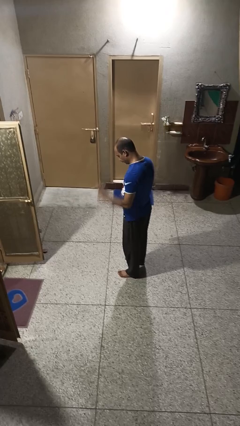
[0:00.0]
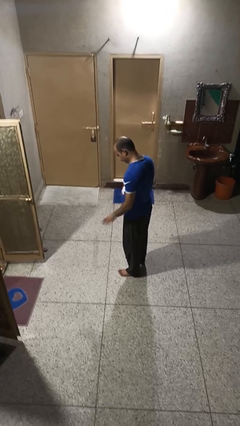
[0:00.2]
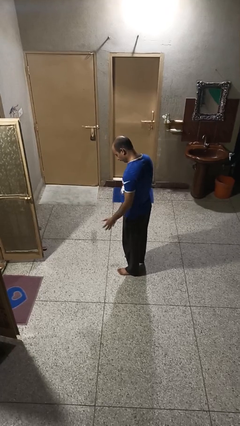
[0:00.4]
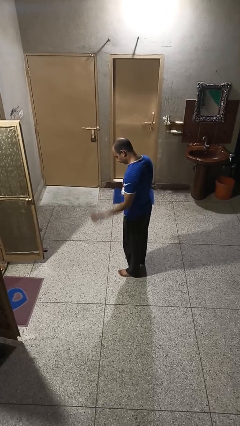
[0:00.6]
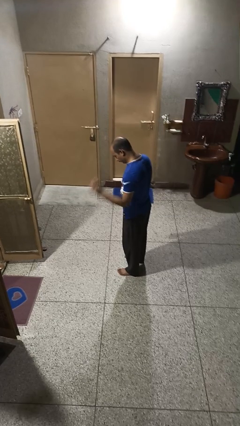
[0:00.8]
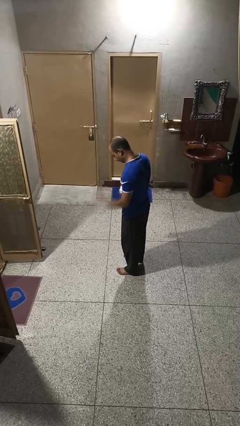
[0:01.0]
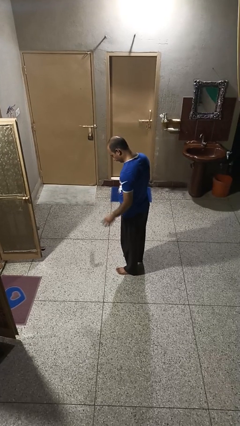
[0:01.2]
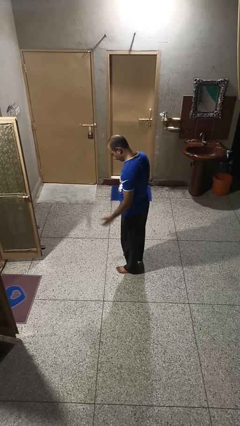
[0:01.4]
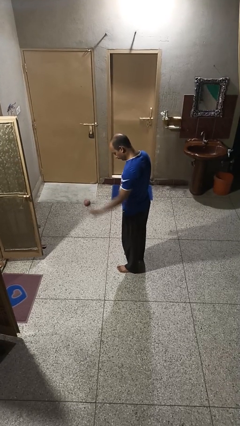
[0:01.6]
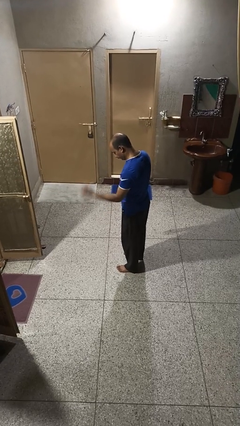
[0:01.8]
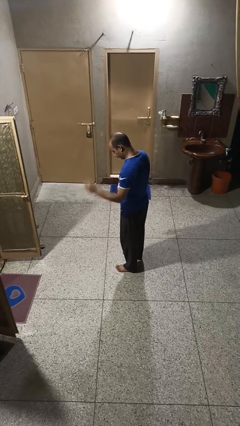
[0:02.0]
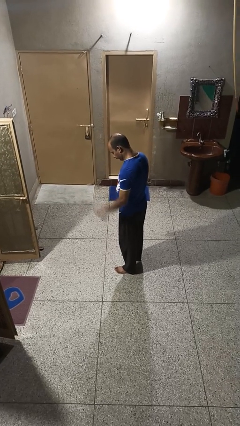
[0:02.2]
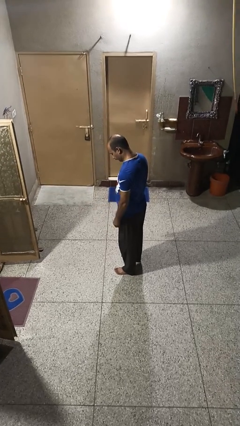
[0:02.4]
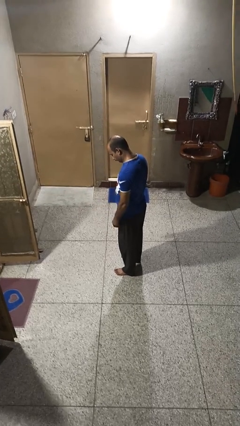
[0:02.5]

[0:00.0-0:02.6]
person bounces ball on floor

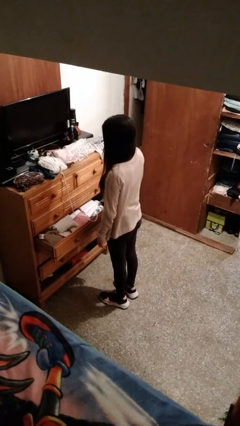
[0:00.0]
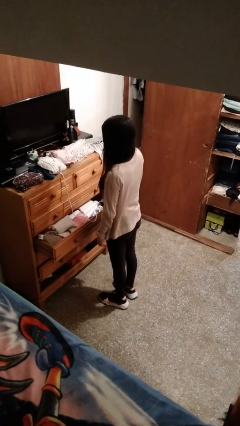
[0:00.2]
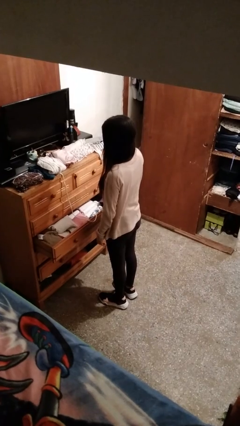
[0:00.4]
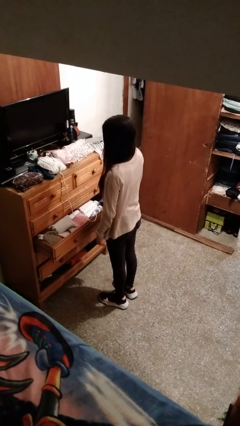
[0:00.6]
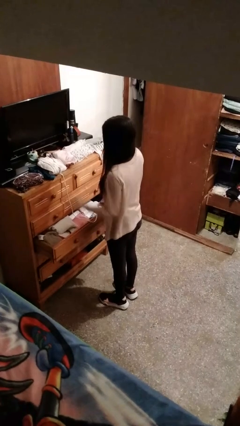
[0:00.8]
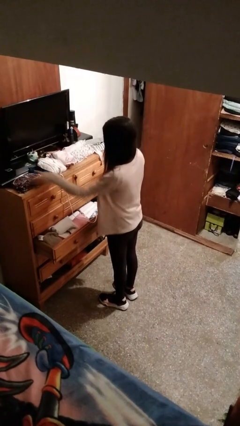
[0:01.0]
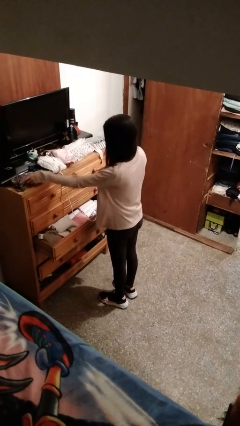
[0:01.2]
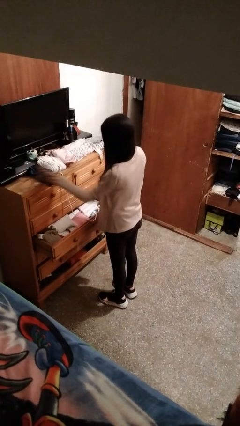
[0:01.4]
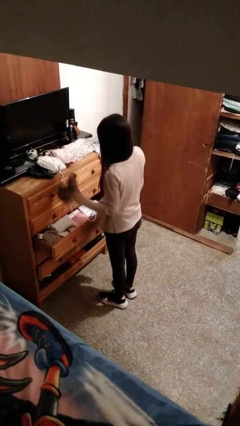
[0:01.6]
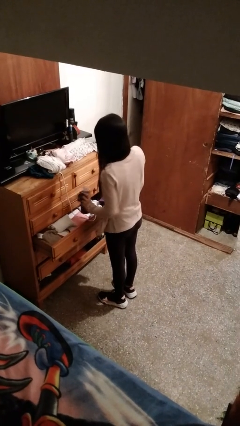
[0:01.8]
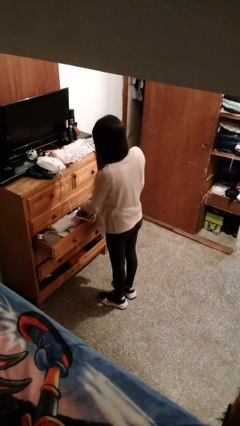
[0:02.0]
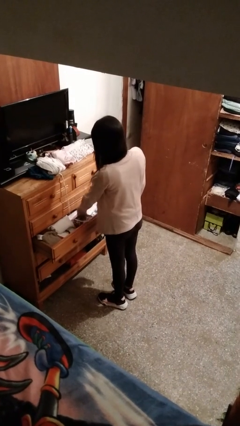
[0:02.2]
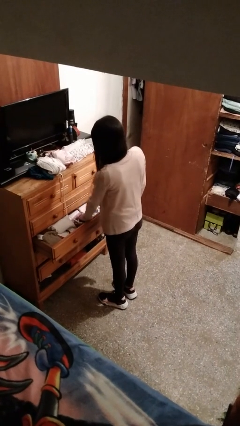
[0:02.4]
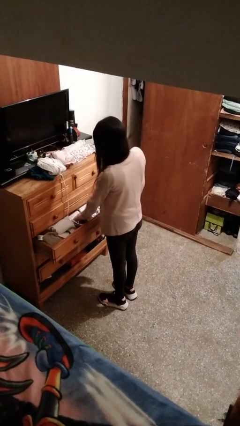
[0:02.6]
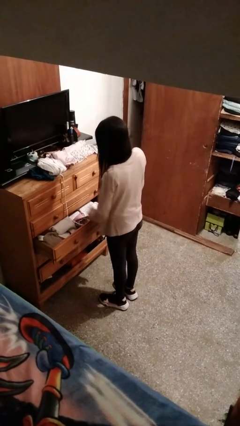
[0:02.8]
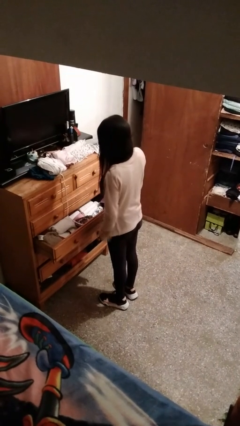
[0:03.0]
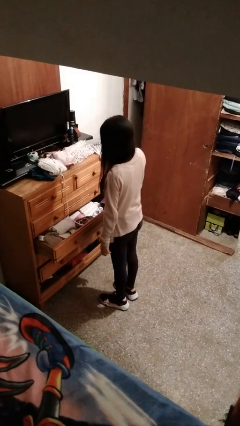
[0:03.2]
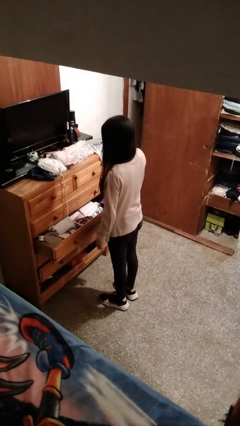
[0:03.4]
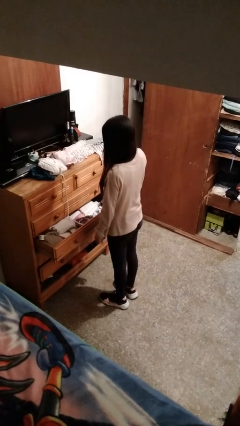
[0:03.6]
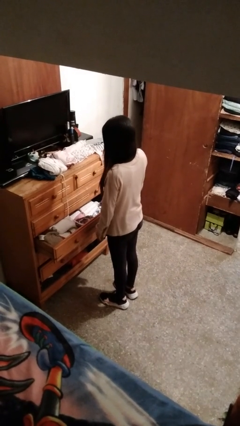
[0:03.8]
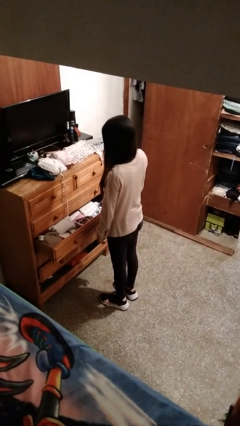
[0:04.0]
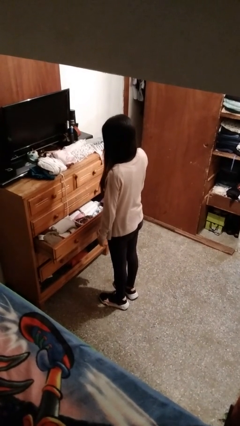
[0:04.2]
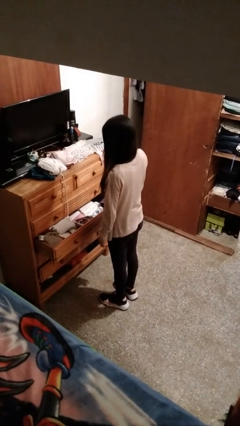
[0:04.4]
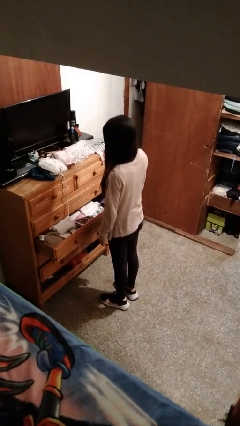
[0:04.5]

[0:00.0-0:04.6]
person puts clothes into dresser

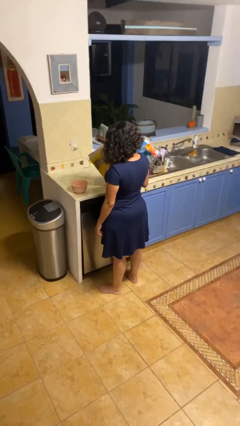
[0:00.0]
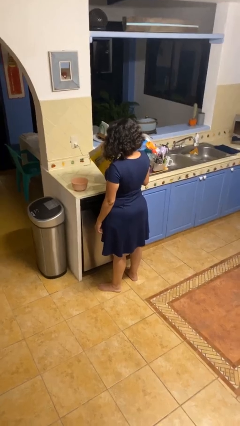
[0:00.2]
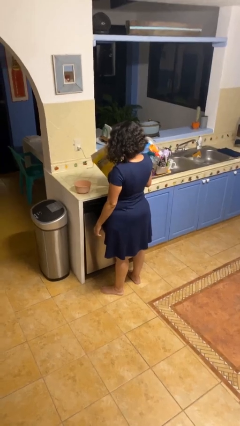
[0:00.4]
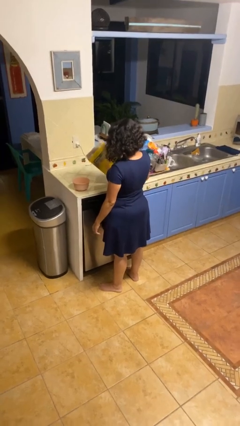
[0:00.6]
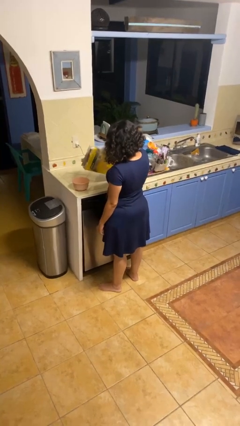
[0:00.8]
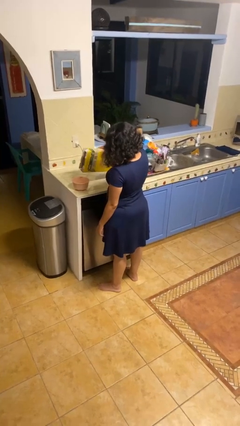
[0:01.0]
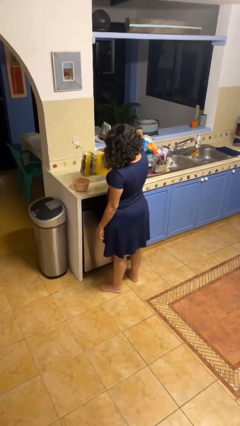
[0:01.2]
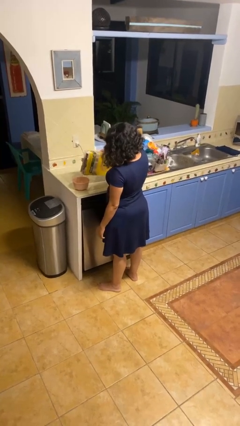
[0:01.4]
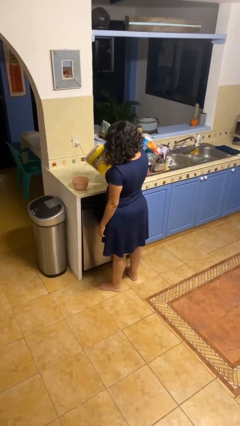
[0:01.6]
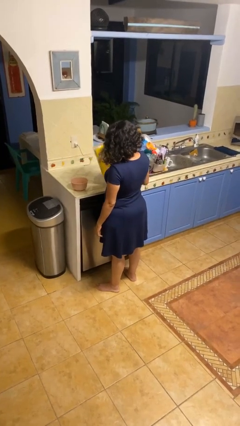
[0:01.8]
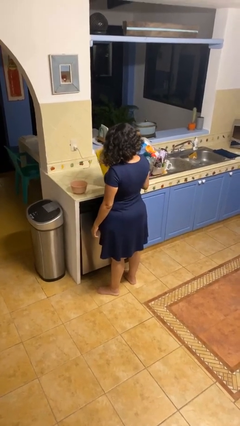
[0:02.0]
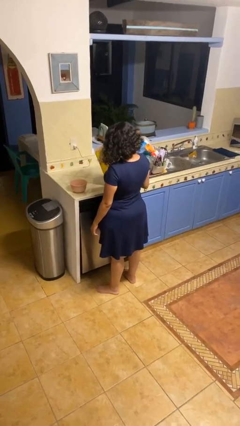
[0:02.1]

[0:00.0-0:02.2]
person pours into bowl

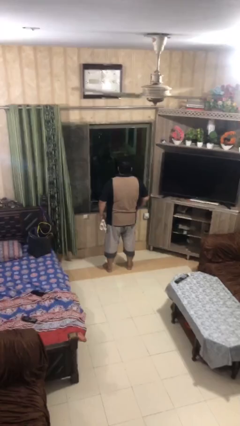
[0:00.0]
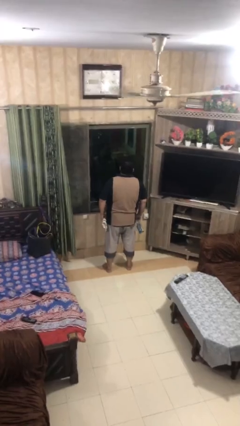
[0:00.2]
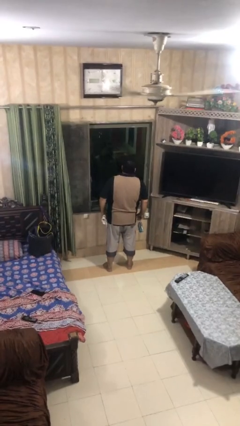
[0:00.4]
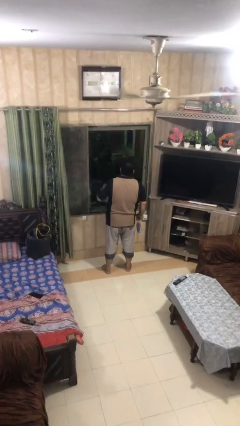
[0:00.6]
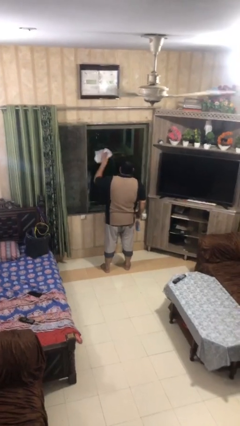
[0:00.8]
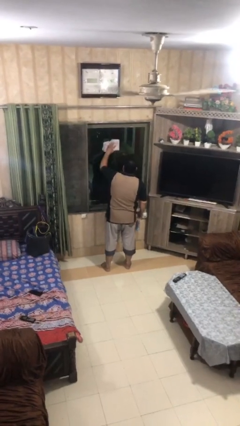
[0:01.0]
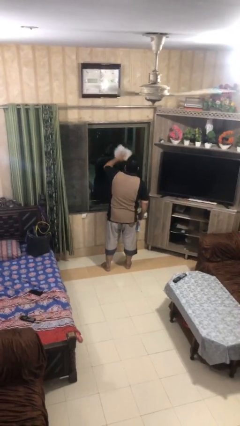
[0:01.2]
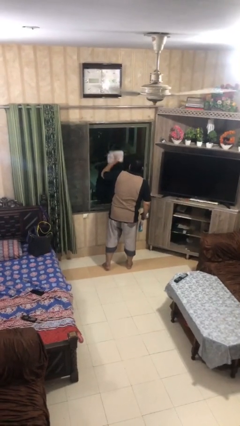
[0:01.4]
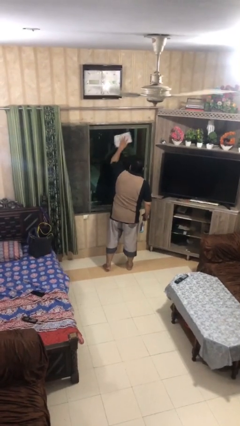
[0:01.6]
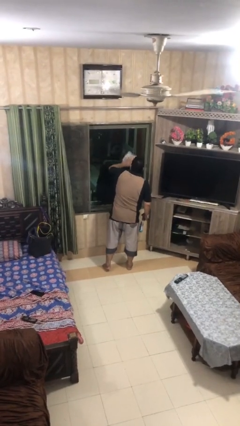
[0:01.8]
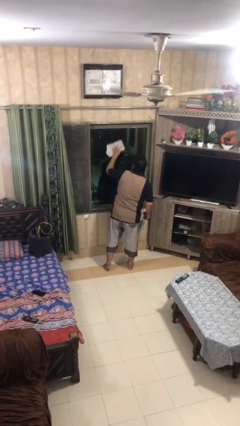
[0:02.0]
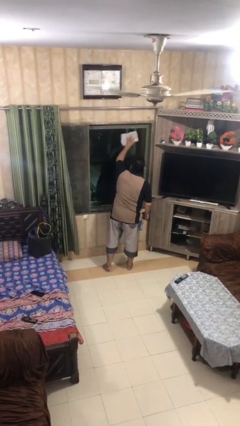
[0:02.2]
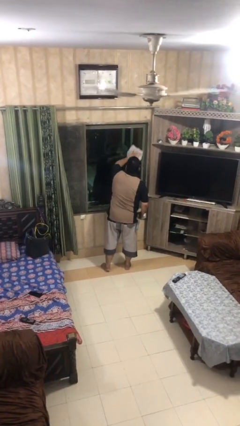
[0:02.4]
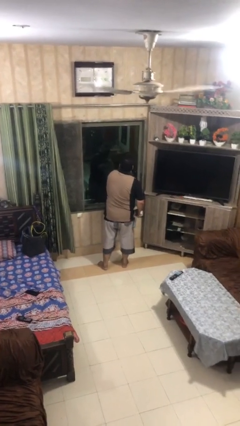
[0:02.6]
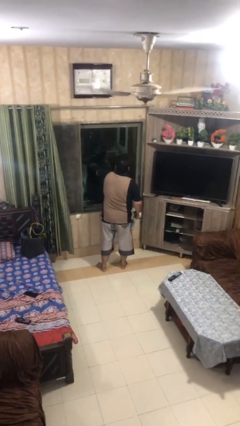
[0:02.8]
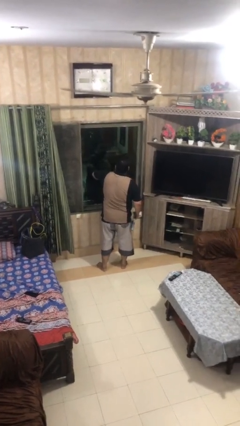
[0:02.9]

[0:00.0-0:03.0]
person washes window

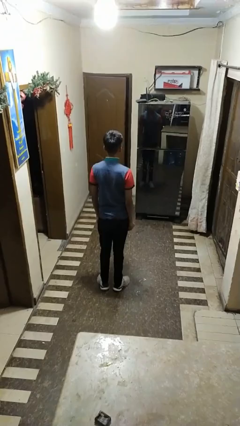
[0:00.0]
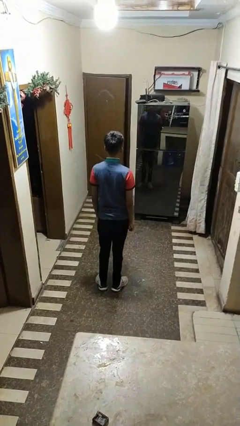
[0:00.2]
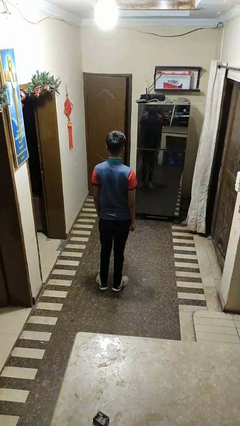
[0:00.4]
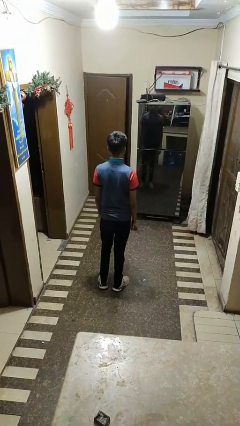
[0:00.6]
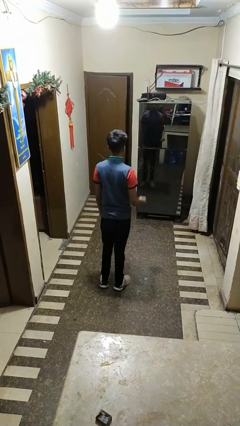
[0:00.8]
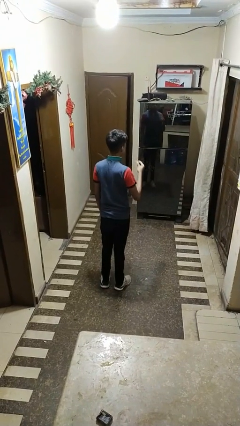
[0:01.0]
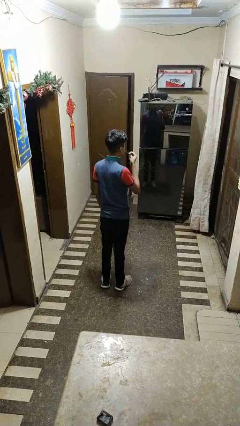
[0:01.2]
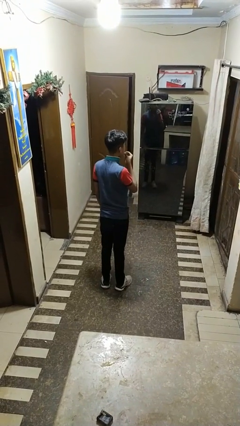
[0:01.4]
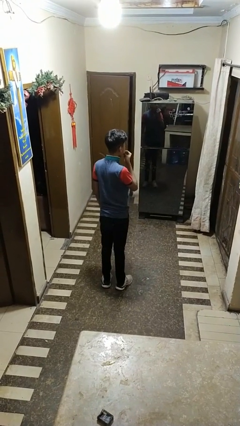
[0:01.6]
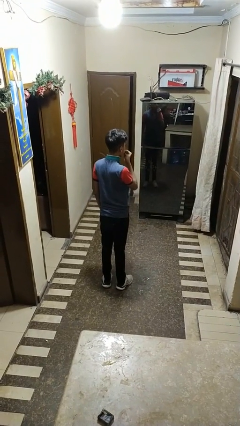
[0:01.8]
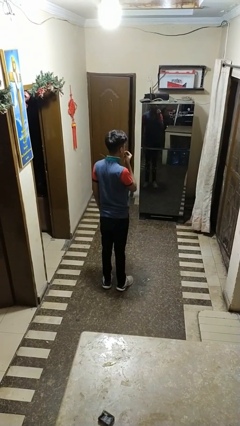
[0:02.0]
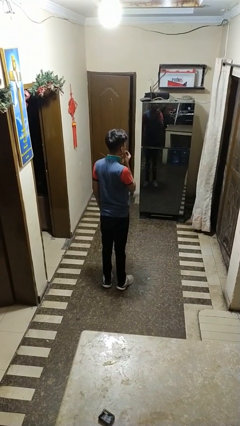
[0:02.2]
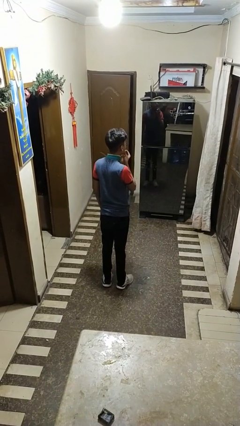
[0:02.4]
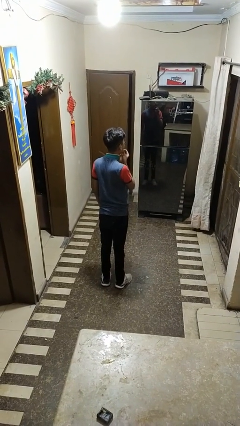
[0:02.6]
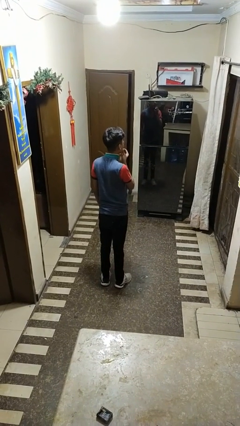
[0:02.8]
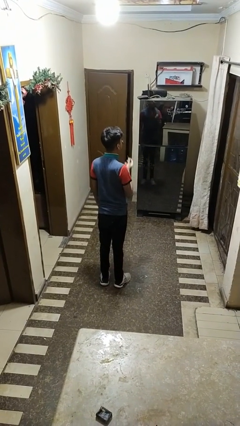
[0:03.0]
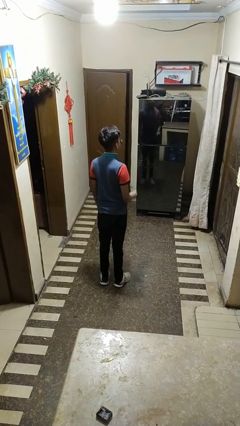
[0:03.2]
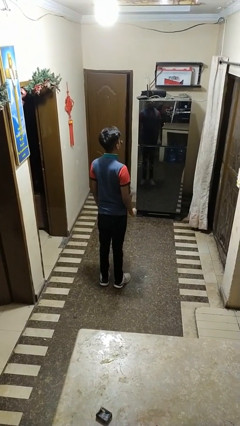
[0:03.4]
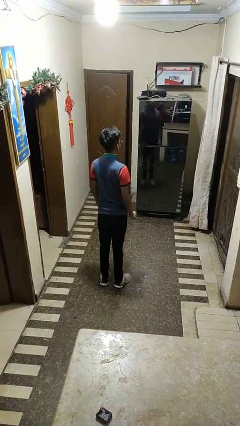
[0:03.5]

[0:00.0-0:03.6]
person flosses

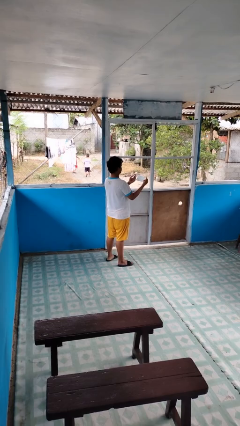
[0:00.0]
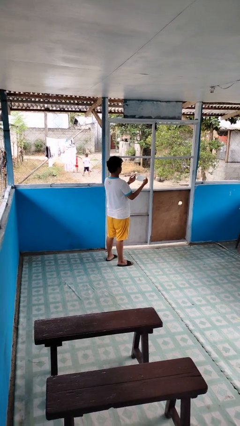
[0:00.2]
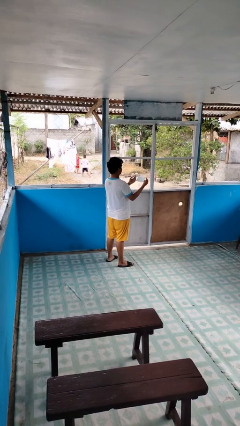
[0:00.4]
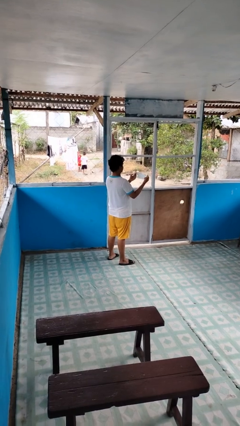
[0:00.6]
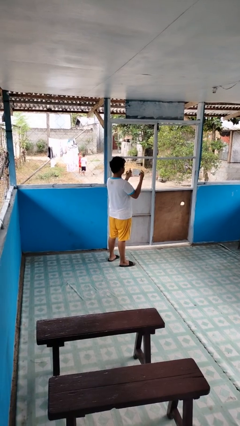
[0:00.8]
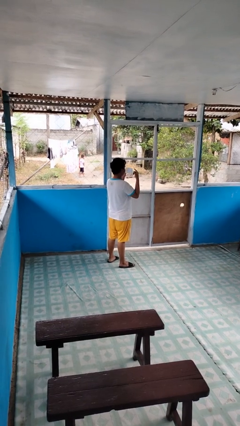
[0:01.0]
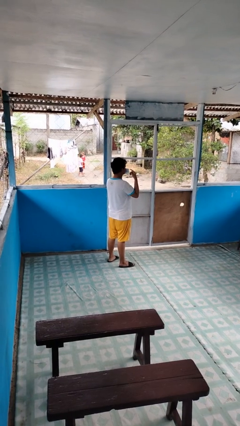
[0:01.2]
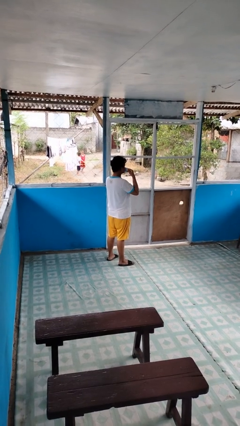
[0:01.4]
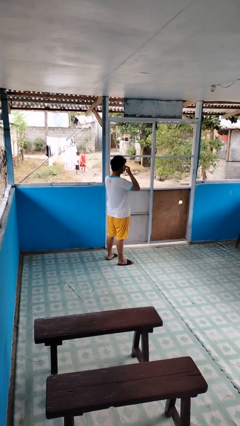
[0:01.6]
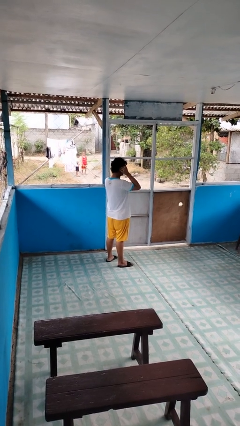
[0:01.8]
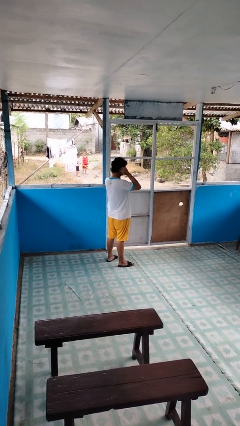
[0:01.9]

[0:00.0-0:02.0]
person puts on facemask
